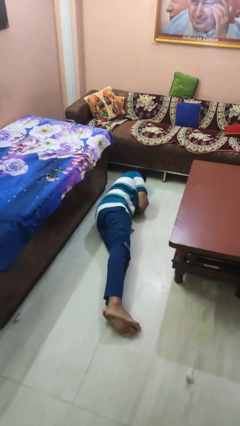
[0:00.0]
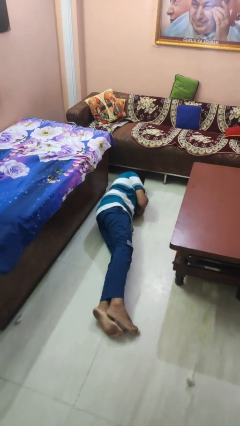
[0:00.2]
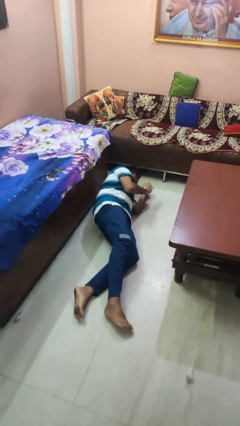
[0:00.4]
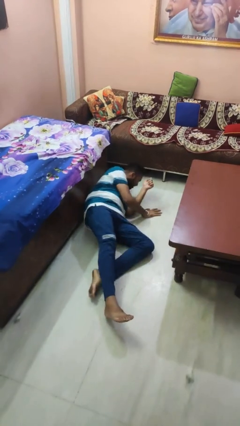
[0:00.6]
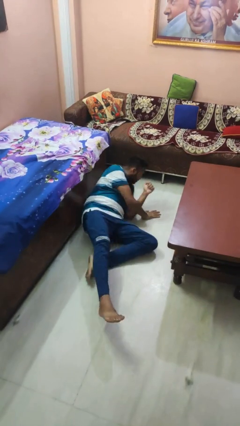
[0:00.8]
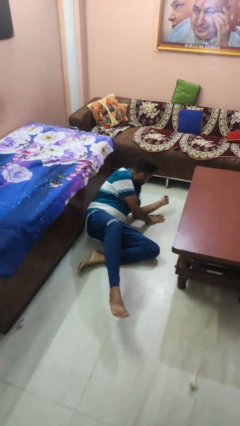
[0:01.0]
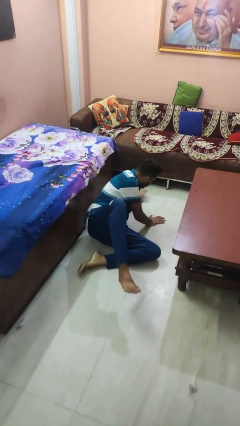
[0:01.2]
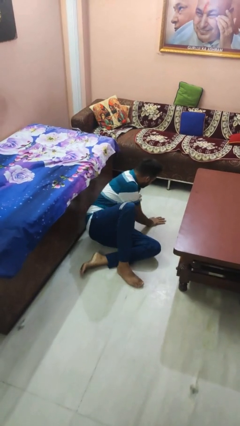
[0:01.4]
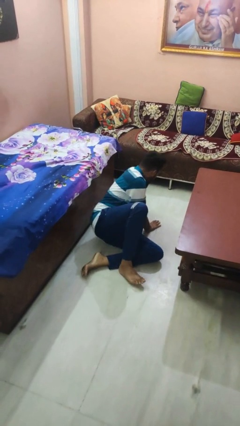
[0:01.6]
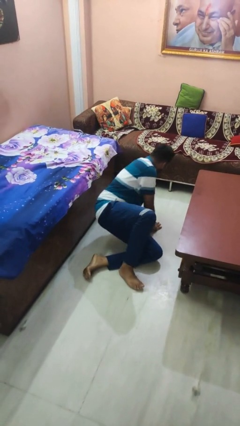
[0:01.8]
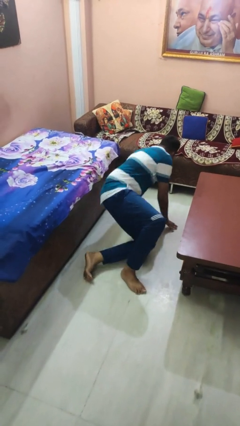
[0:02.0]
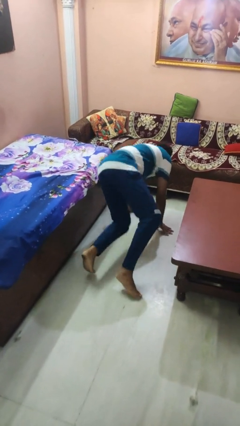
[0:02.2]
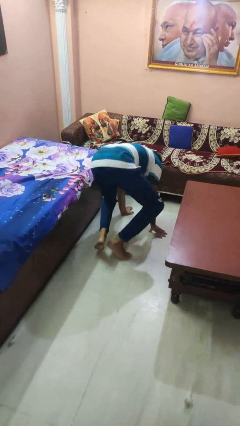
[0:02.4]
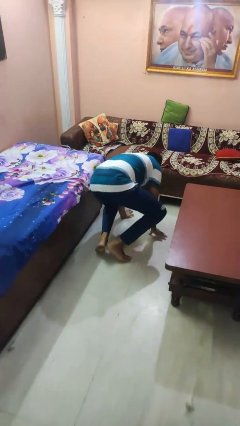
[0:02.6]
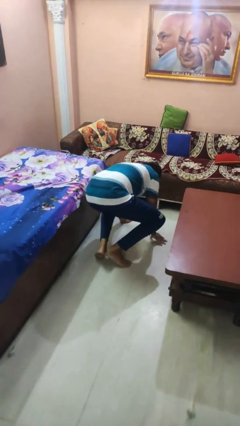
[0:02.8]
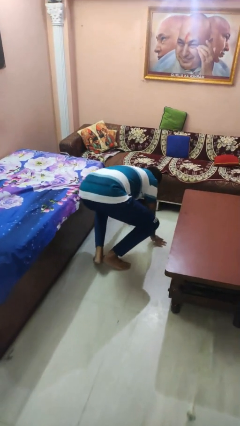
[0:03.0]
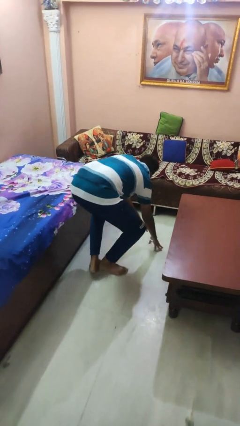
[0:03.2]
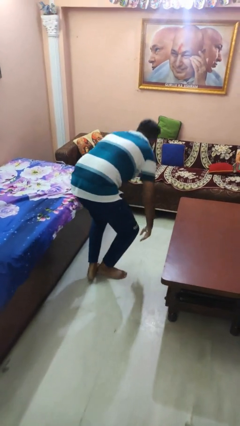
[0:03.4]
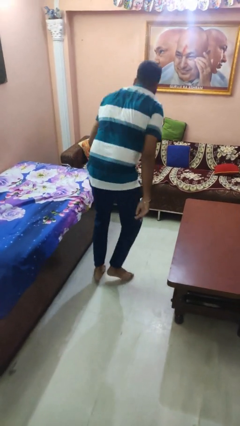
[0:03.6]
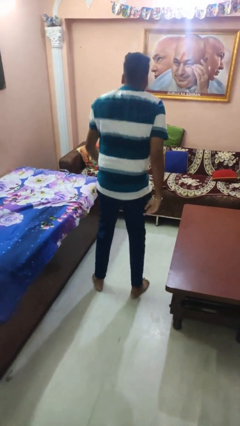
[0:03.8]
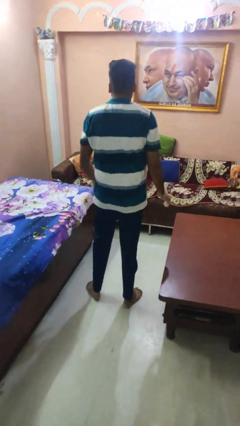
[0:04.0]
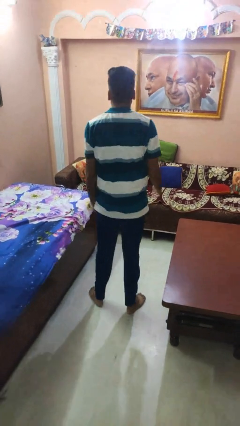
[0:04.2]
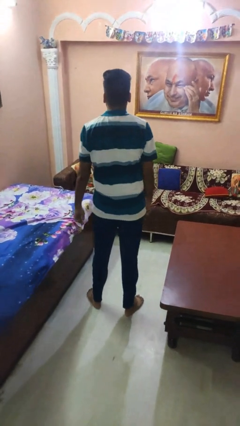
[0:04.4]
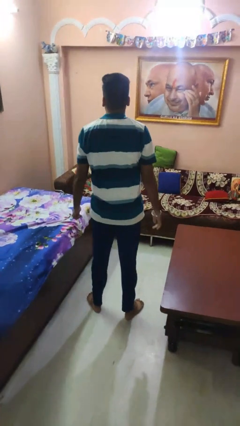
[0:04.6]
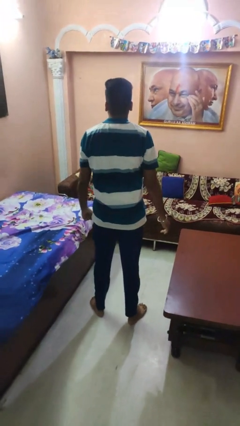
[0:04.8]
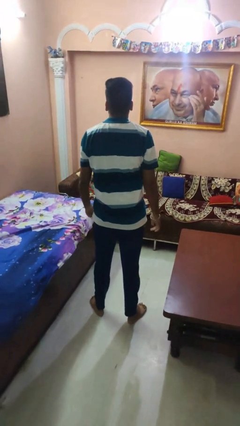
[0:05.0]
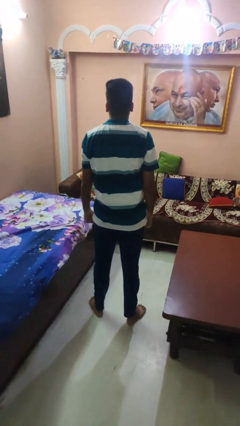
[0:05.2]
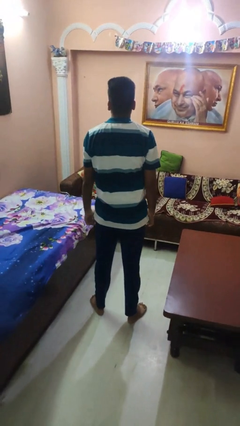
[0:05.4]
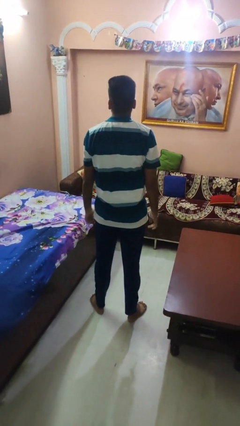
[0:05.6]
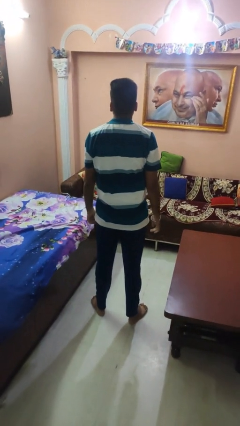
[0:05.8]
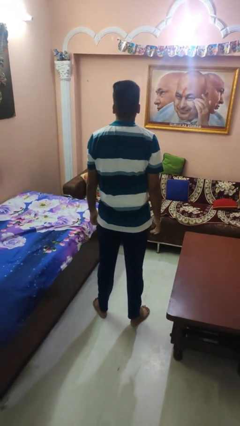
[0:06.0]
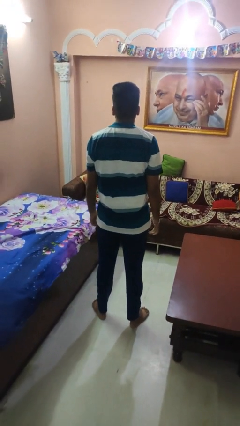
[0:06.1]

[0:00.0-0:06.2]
person stands up from floor

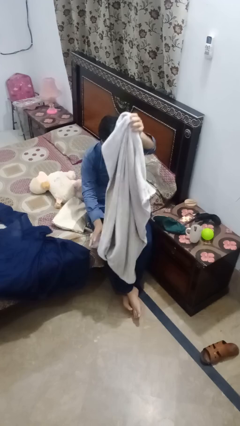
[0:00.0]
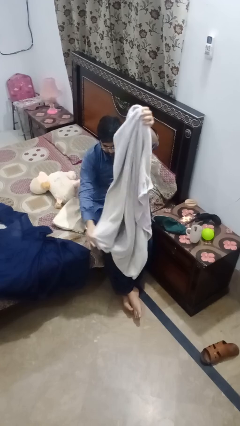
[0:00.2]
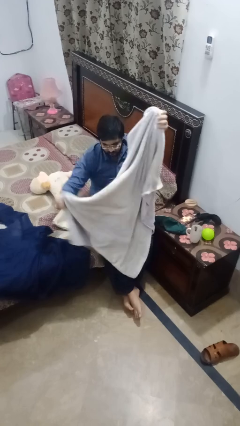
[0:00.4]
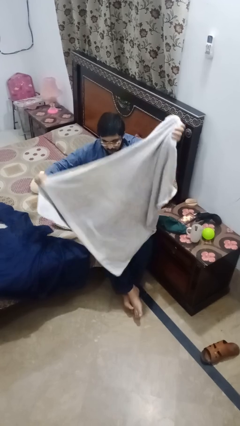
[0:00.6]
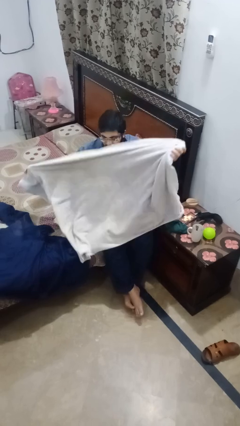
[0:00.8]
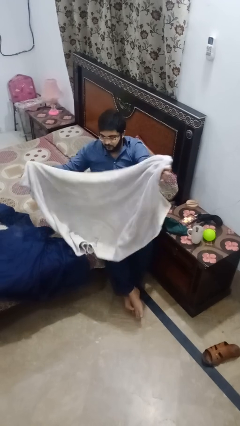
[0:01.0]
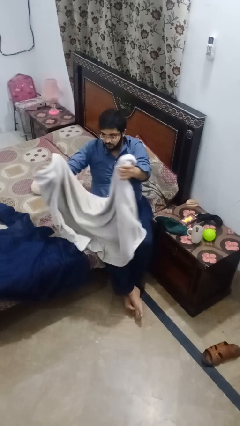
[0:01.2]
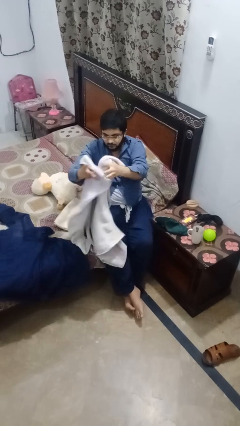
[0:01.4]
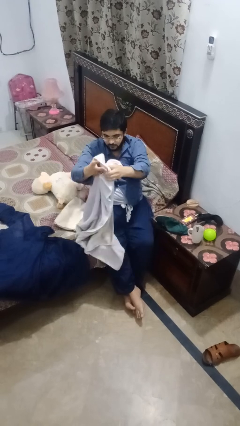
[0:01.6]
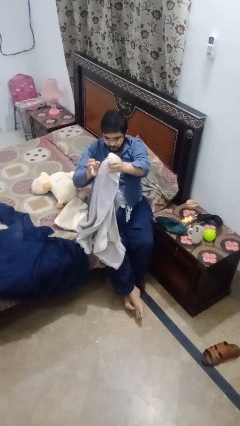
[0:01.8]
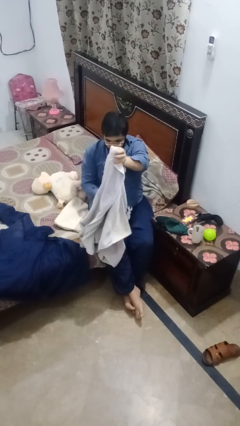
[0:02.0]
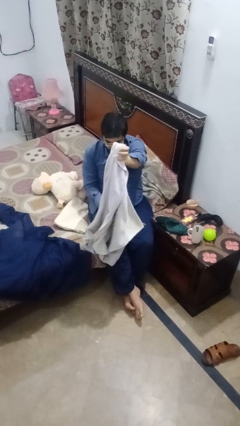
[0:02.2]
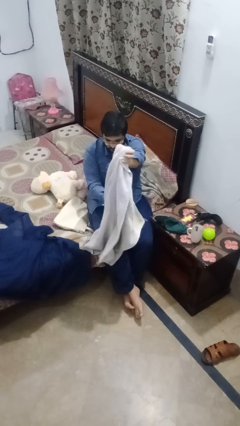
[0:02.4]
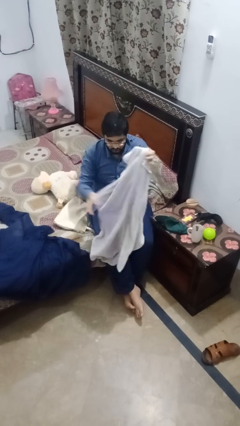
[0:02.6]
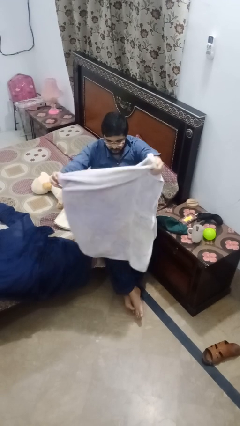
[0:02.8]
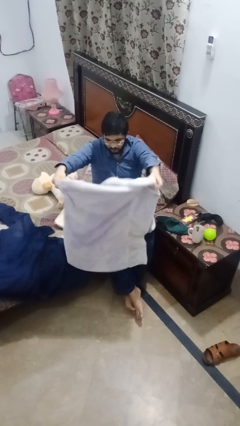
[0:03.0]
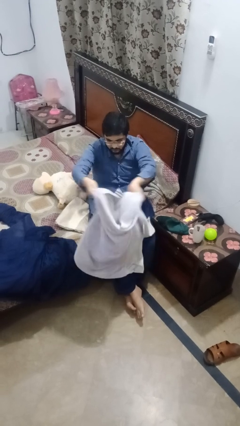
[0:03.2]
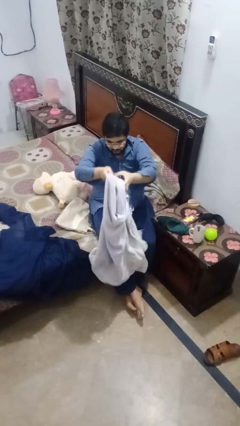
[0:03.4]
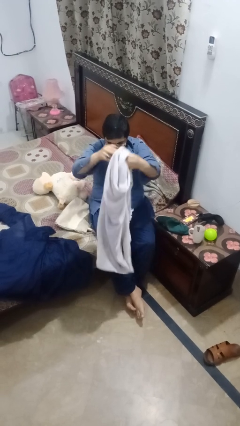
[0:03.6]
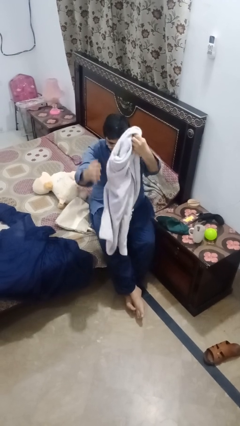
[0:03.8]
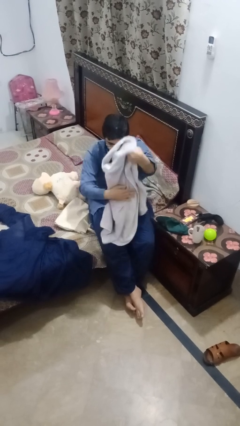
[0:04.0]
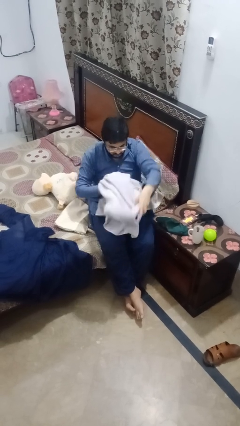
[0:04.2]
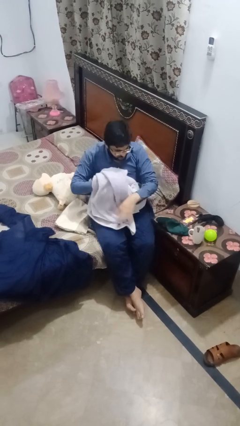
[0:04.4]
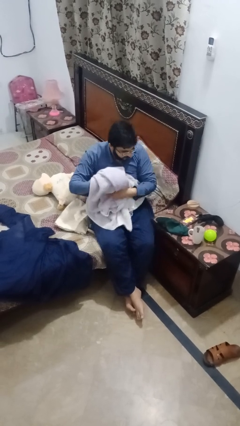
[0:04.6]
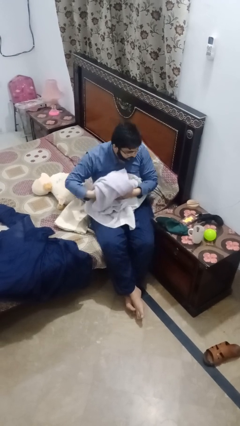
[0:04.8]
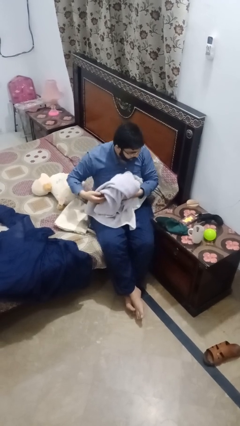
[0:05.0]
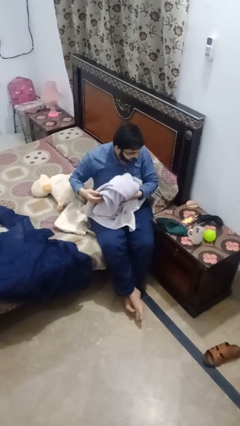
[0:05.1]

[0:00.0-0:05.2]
person folds towel

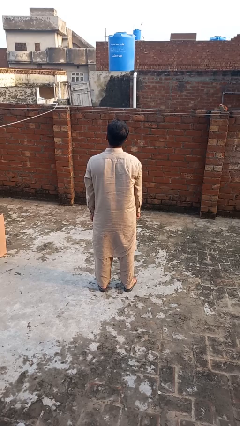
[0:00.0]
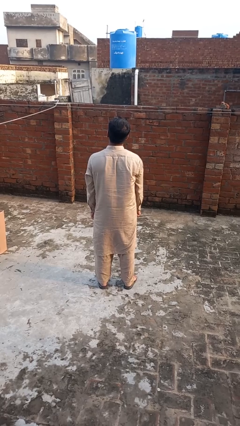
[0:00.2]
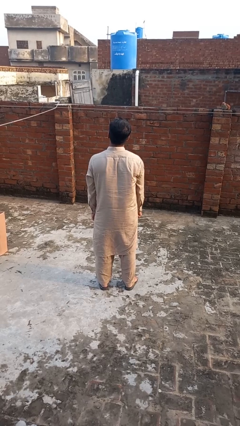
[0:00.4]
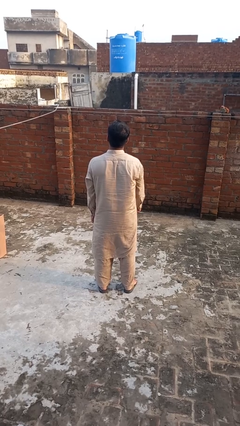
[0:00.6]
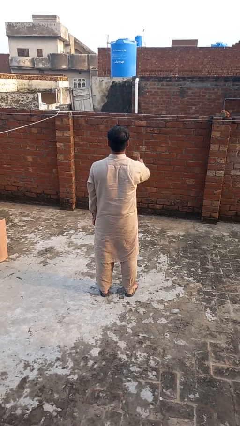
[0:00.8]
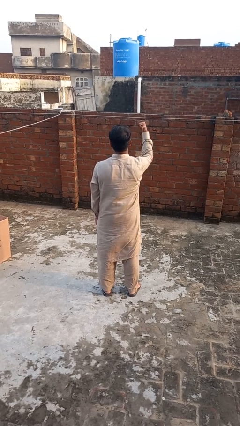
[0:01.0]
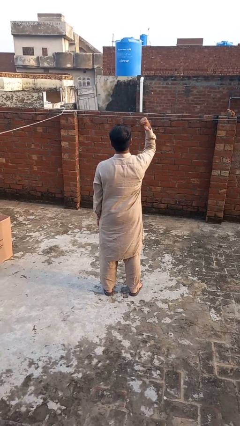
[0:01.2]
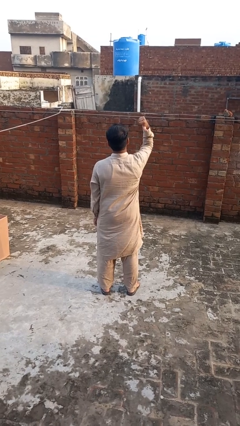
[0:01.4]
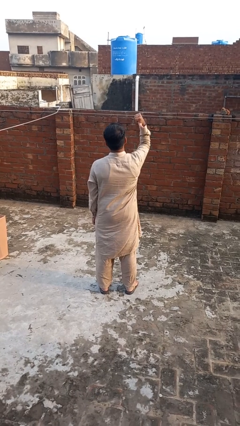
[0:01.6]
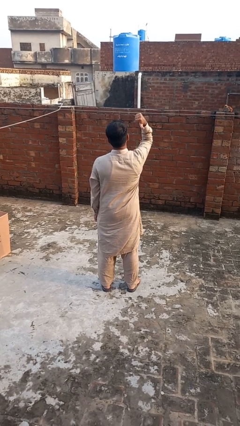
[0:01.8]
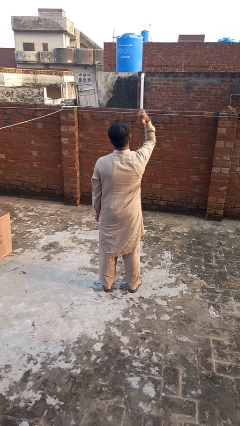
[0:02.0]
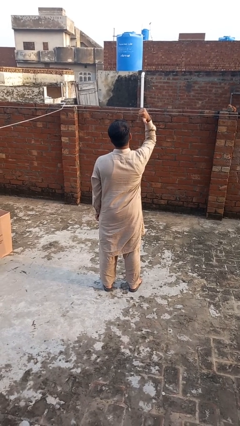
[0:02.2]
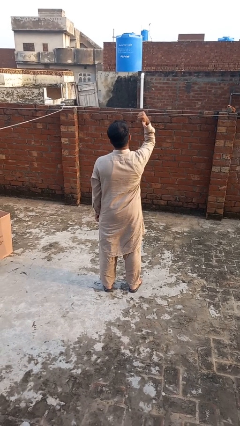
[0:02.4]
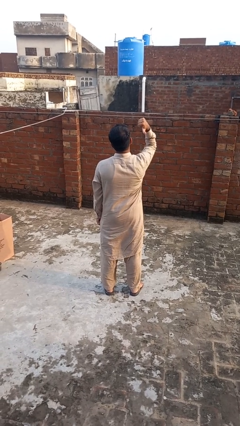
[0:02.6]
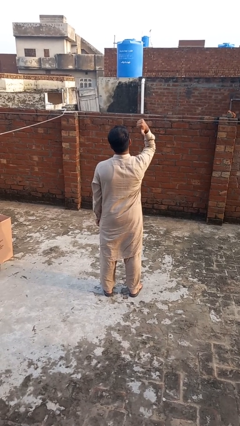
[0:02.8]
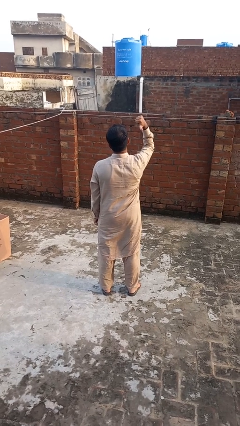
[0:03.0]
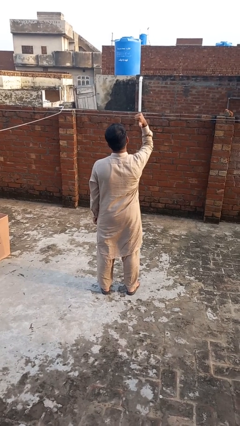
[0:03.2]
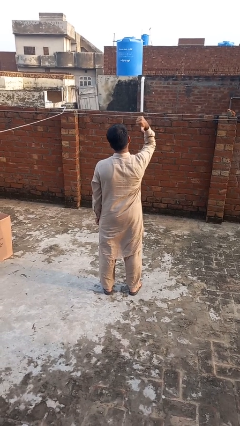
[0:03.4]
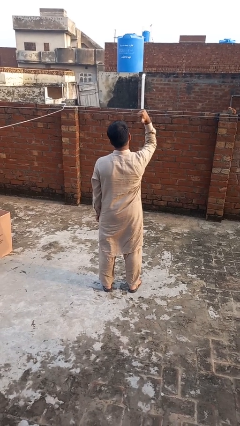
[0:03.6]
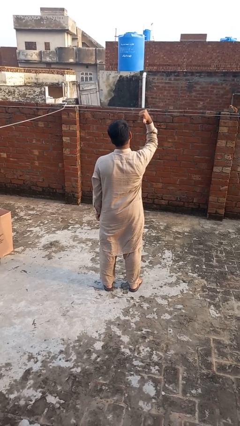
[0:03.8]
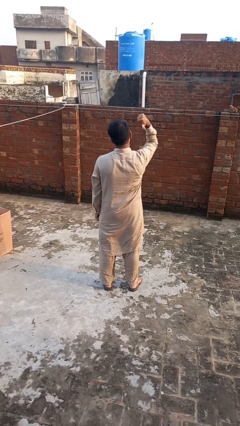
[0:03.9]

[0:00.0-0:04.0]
person gestures behind me

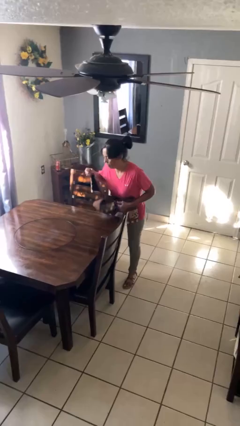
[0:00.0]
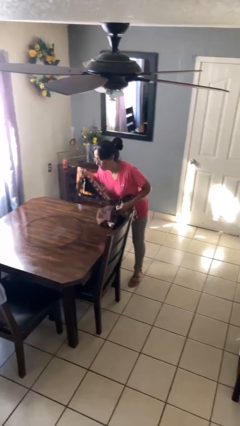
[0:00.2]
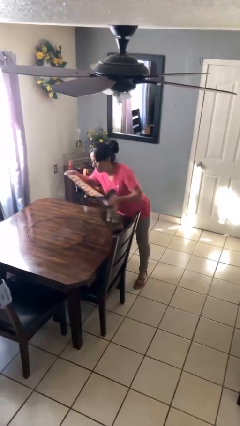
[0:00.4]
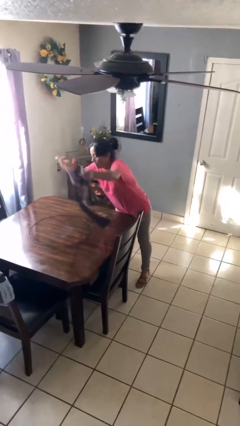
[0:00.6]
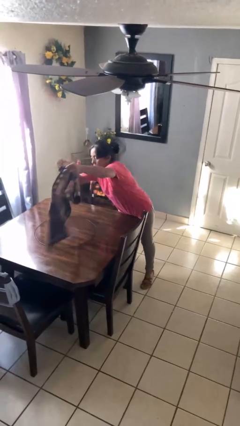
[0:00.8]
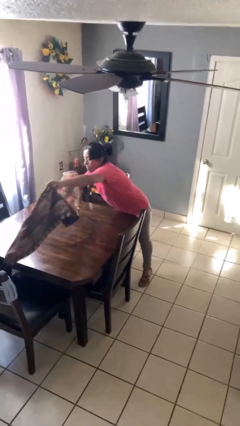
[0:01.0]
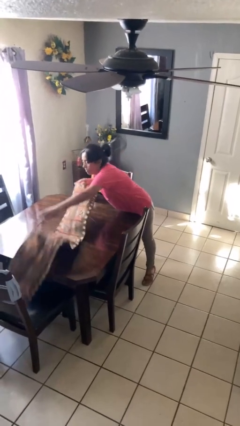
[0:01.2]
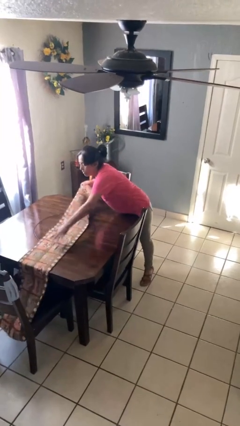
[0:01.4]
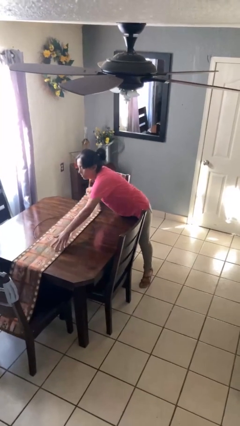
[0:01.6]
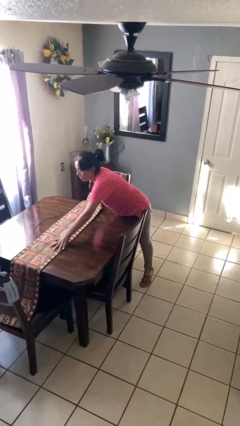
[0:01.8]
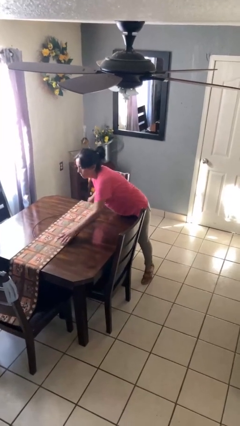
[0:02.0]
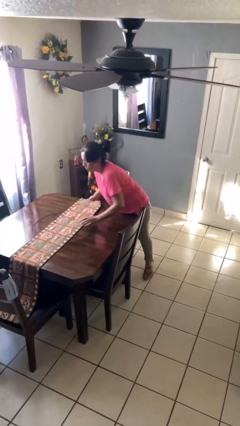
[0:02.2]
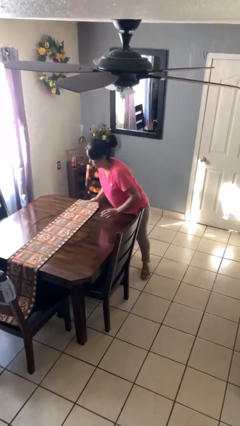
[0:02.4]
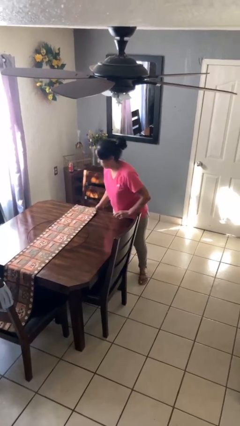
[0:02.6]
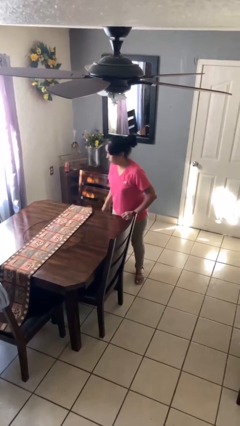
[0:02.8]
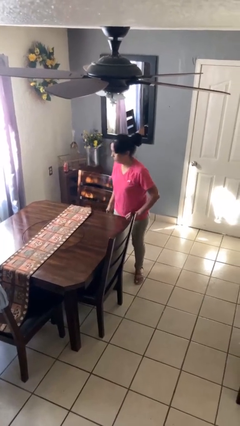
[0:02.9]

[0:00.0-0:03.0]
person spreads tablecloth
